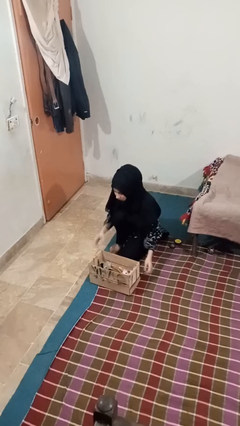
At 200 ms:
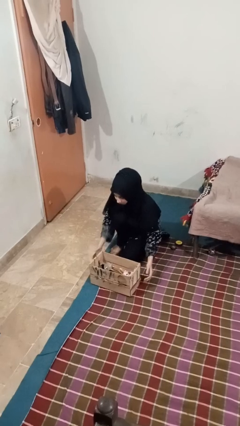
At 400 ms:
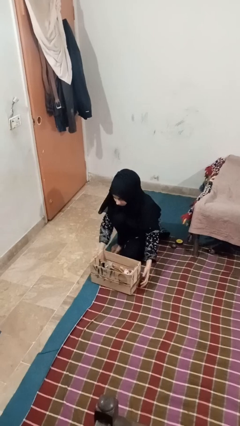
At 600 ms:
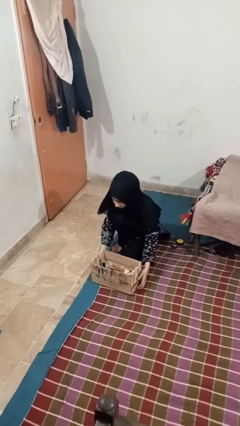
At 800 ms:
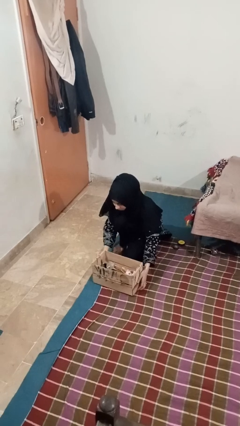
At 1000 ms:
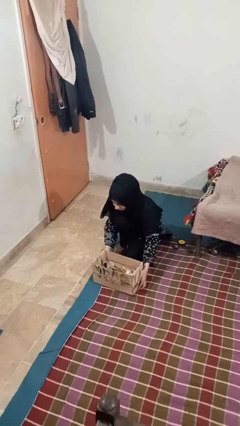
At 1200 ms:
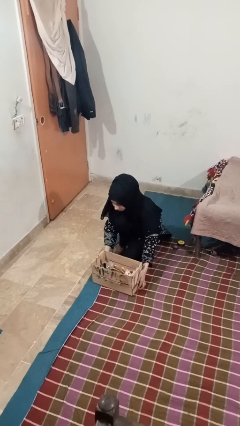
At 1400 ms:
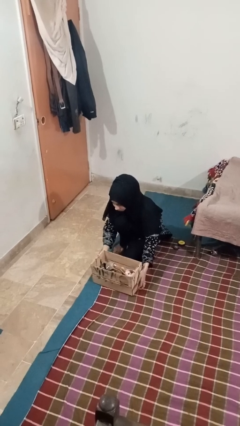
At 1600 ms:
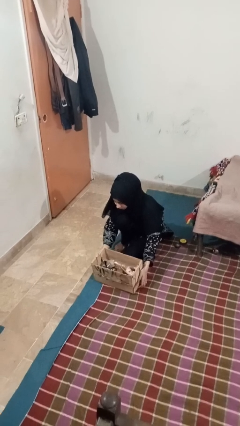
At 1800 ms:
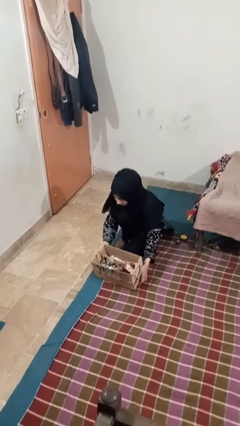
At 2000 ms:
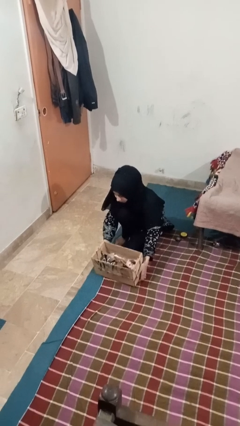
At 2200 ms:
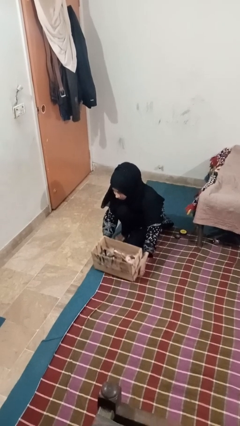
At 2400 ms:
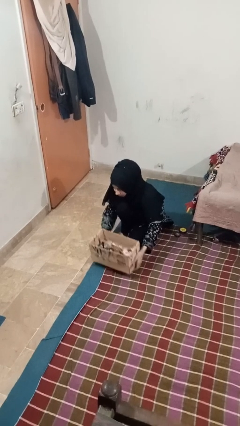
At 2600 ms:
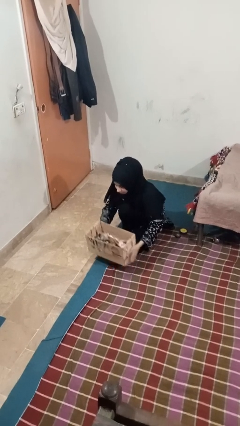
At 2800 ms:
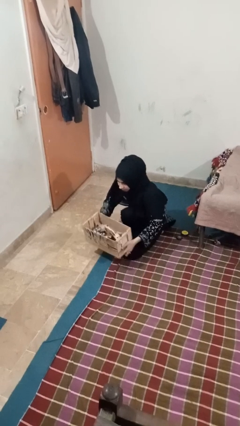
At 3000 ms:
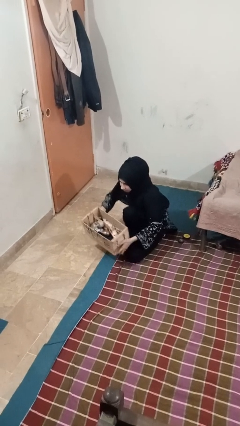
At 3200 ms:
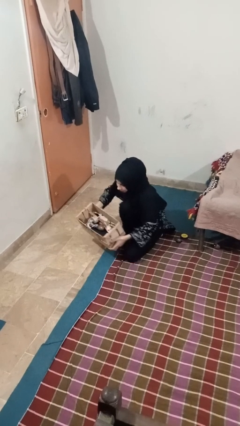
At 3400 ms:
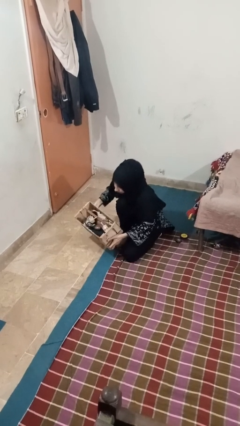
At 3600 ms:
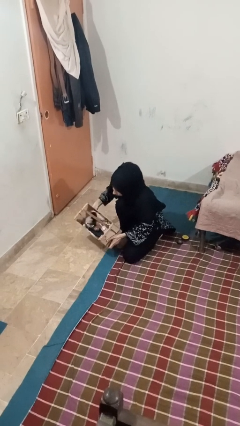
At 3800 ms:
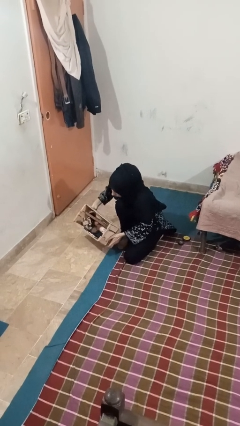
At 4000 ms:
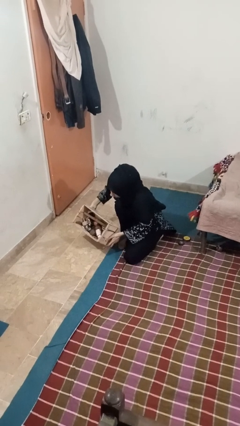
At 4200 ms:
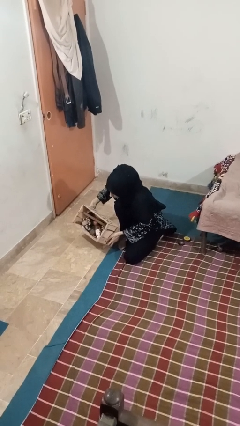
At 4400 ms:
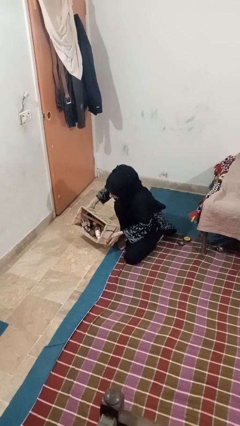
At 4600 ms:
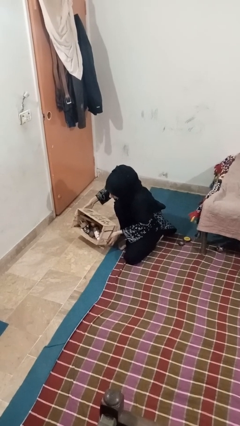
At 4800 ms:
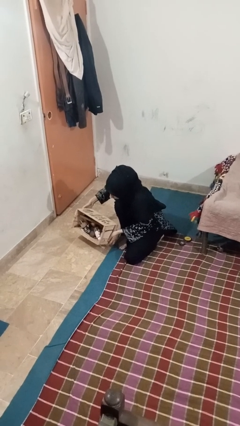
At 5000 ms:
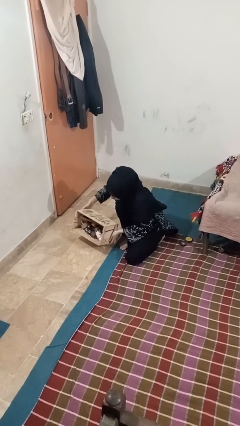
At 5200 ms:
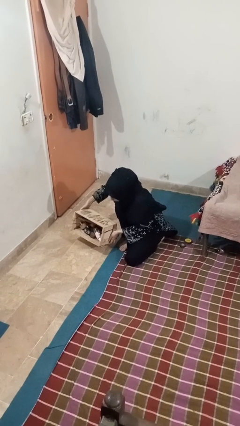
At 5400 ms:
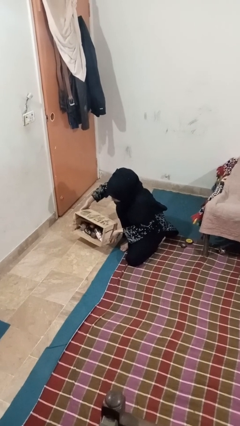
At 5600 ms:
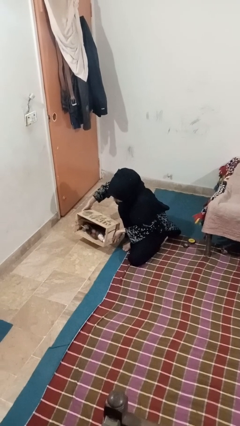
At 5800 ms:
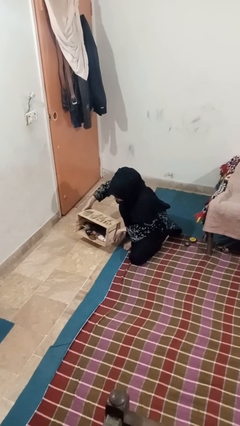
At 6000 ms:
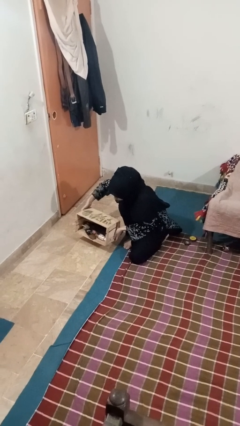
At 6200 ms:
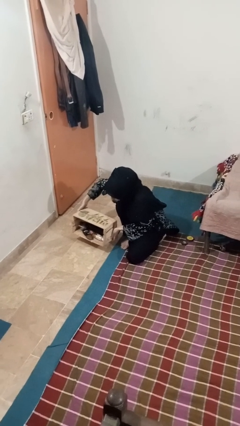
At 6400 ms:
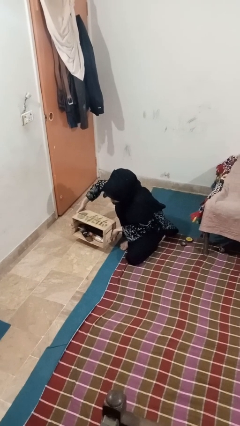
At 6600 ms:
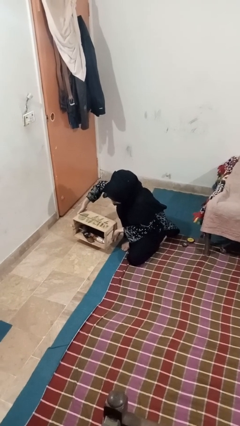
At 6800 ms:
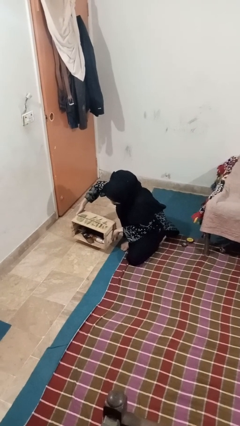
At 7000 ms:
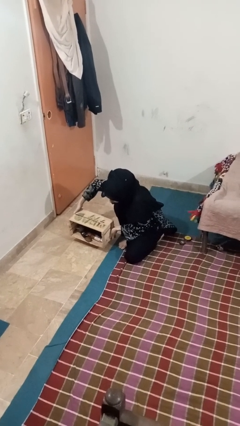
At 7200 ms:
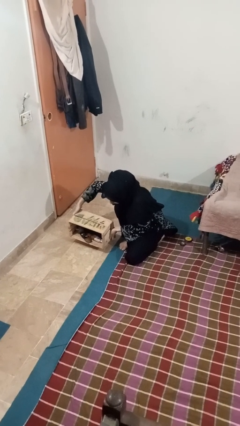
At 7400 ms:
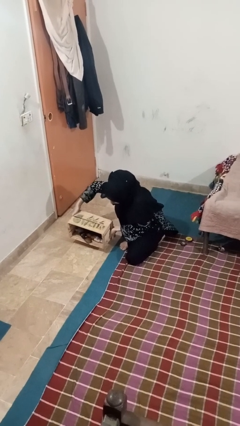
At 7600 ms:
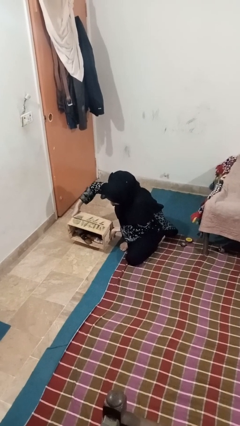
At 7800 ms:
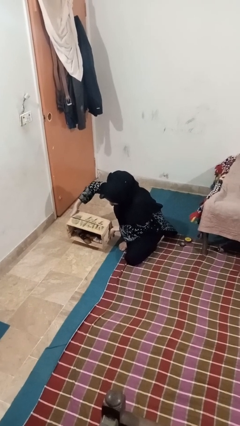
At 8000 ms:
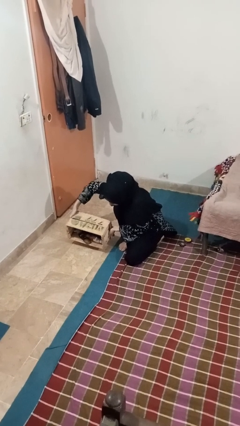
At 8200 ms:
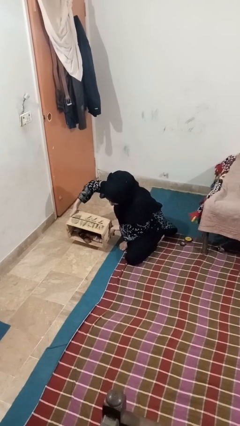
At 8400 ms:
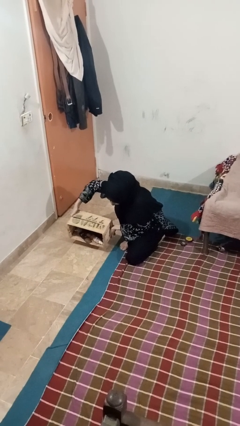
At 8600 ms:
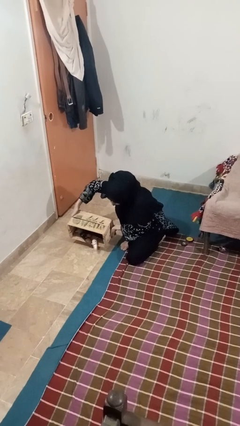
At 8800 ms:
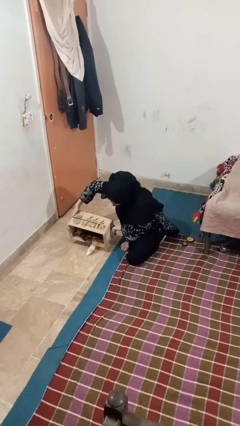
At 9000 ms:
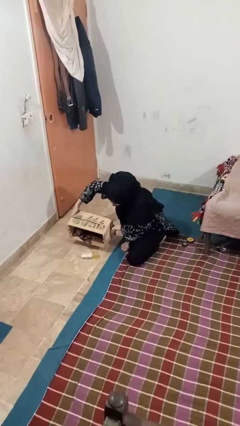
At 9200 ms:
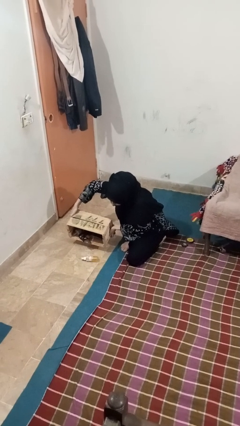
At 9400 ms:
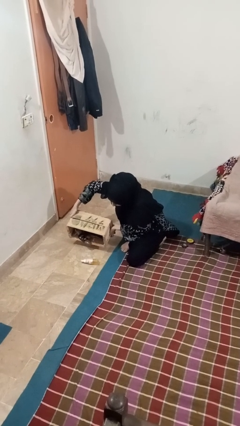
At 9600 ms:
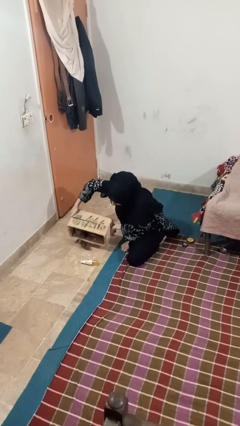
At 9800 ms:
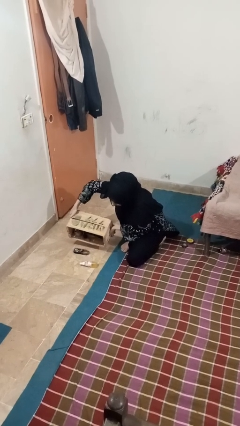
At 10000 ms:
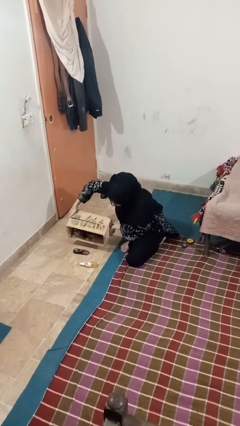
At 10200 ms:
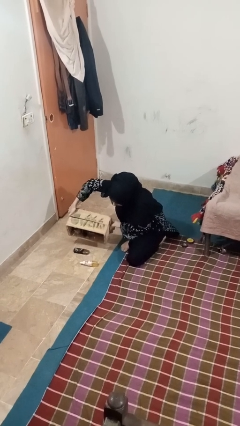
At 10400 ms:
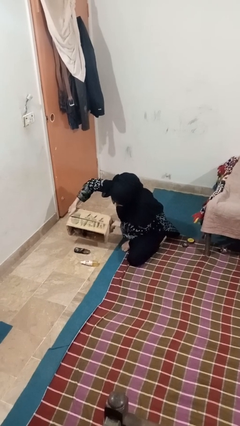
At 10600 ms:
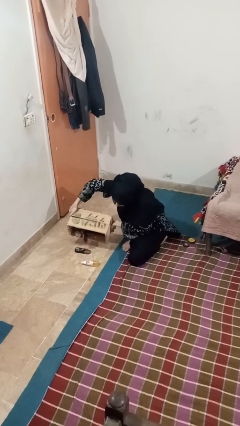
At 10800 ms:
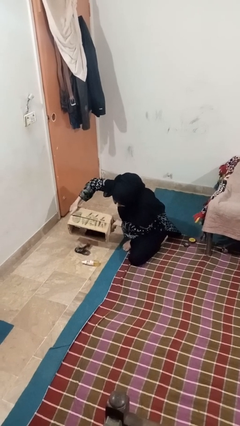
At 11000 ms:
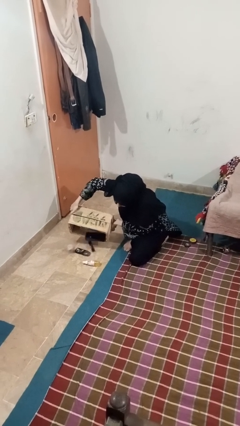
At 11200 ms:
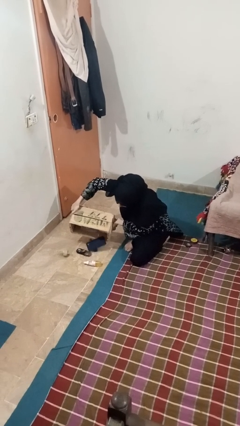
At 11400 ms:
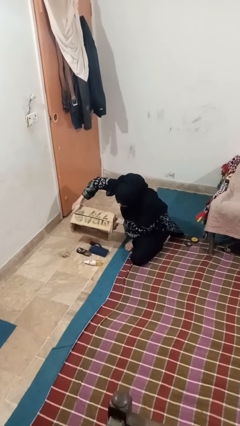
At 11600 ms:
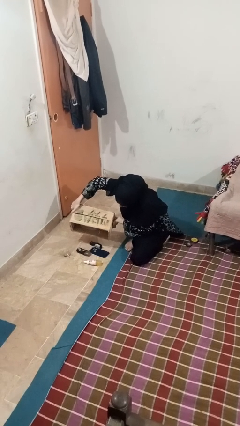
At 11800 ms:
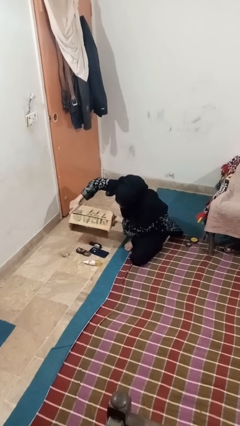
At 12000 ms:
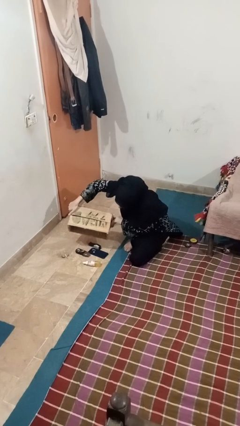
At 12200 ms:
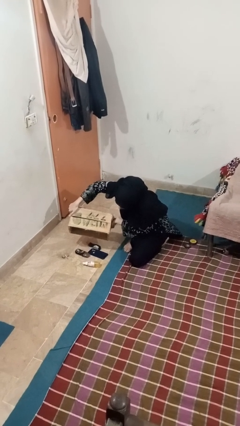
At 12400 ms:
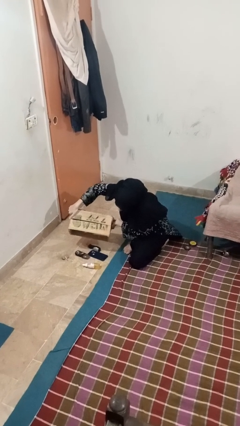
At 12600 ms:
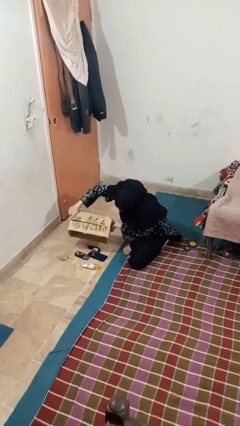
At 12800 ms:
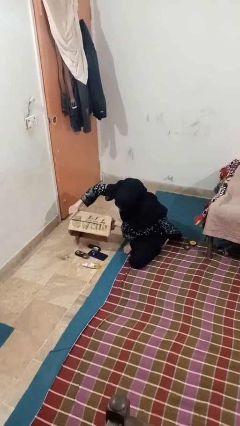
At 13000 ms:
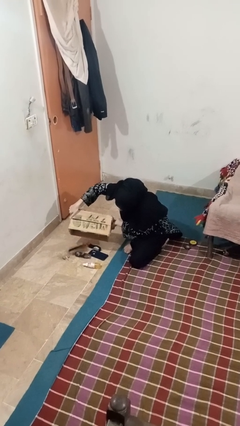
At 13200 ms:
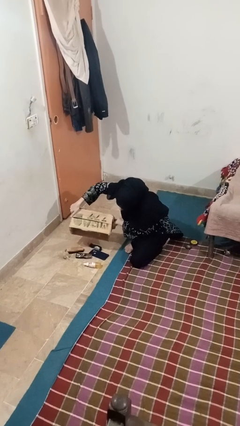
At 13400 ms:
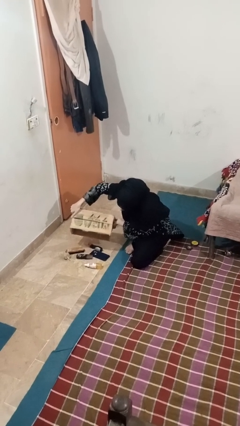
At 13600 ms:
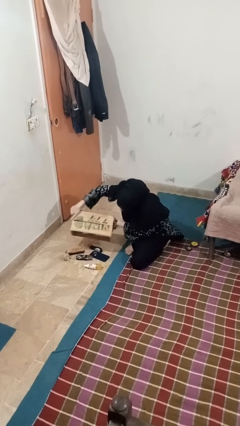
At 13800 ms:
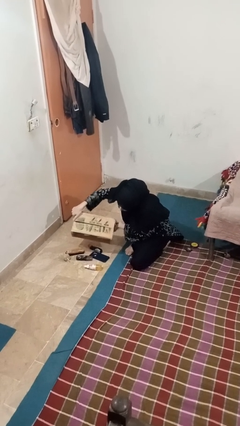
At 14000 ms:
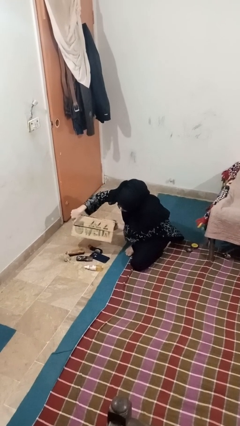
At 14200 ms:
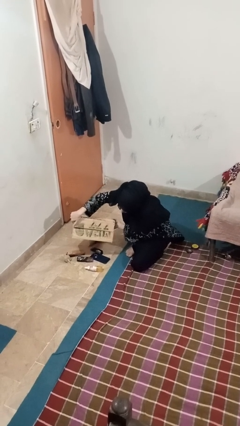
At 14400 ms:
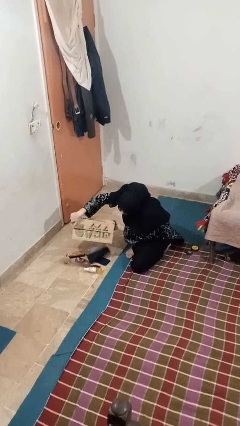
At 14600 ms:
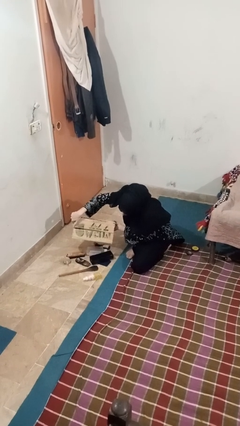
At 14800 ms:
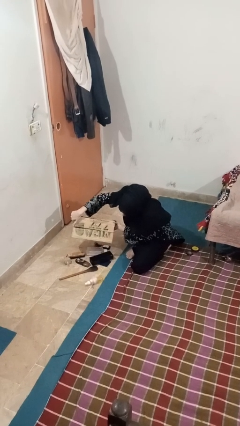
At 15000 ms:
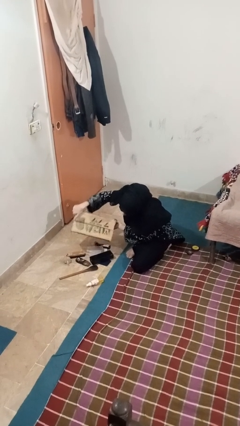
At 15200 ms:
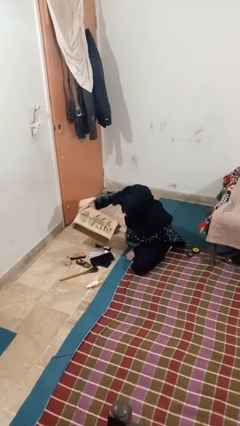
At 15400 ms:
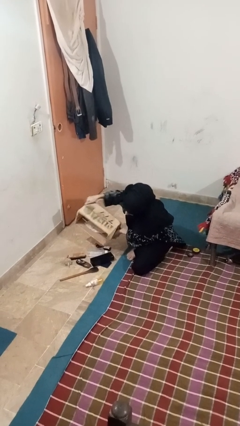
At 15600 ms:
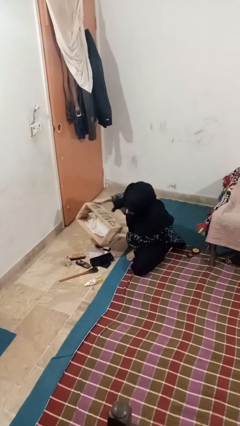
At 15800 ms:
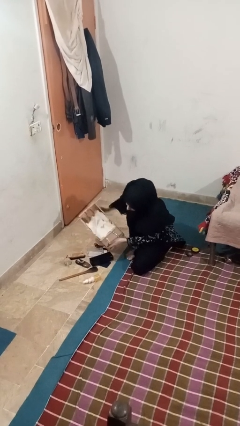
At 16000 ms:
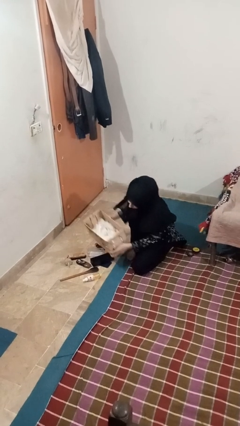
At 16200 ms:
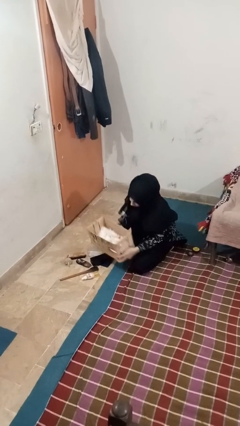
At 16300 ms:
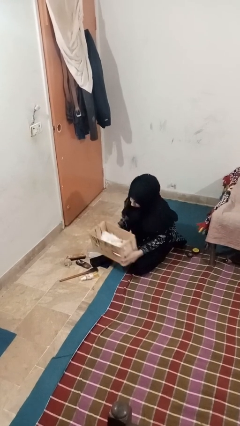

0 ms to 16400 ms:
person unloads box onto floor

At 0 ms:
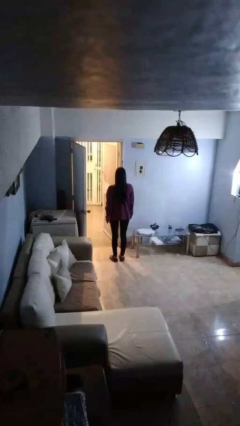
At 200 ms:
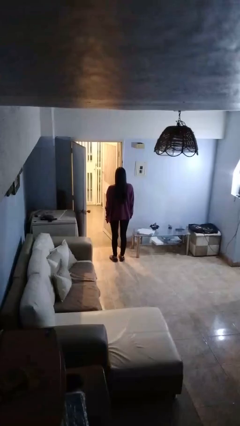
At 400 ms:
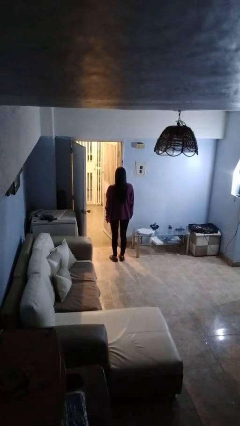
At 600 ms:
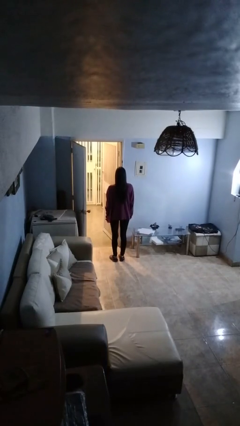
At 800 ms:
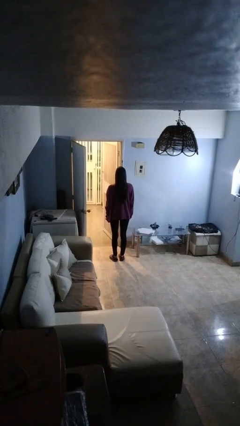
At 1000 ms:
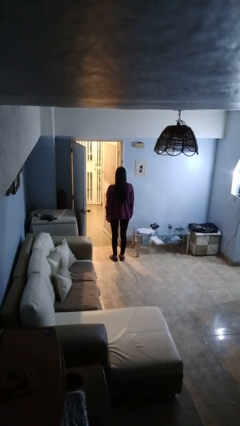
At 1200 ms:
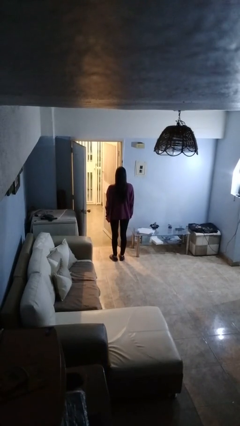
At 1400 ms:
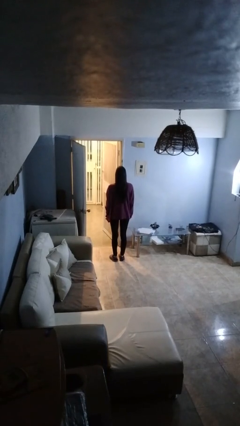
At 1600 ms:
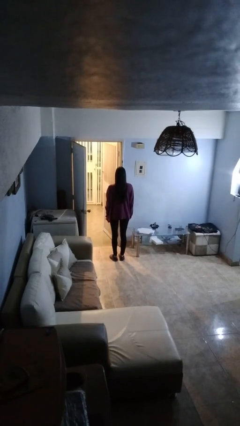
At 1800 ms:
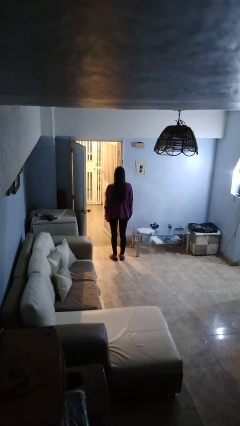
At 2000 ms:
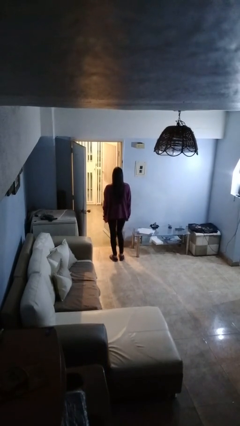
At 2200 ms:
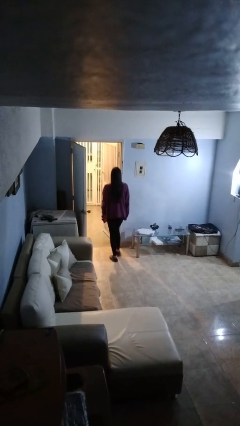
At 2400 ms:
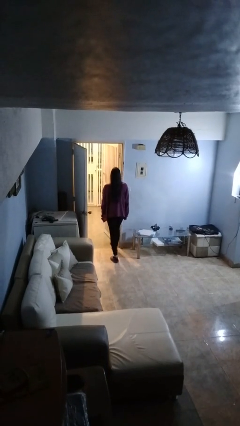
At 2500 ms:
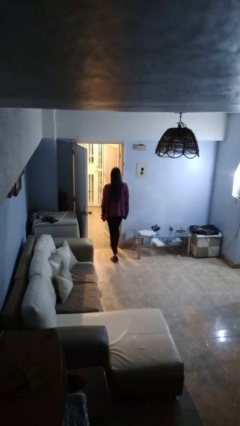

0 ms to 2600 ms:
person bumps into wall
